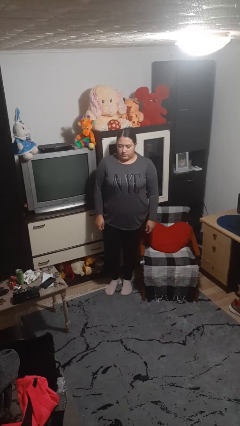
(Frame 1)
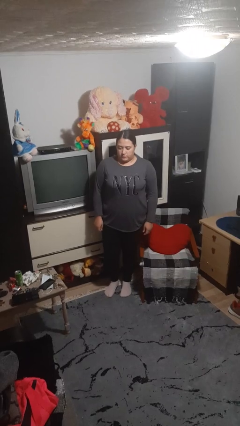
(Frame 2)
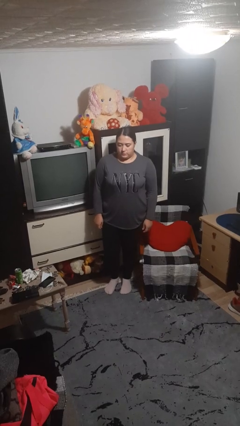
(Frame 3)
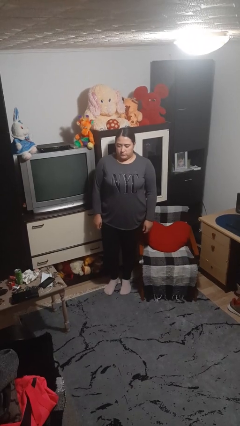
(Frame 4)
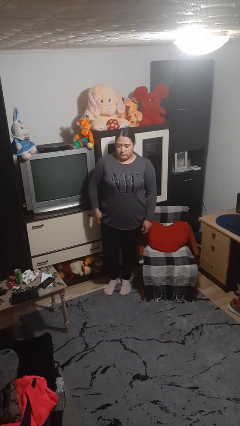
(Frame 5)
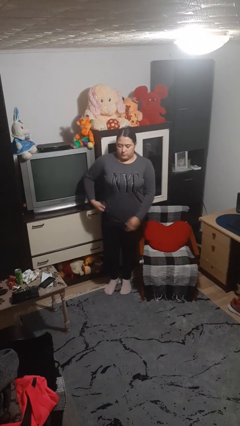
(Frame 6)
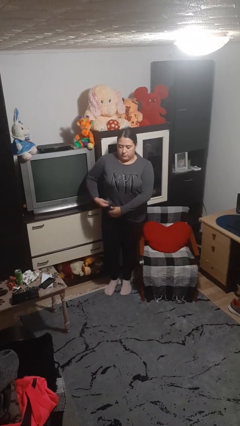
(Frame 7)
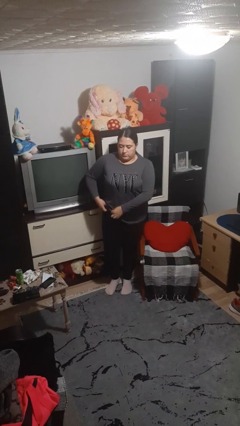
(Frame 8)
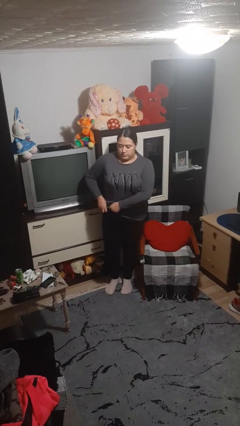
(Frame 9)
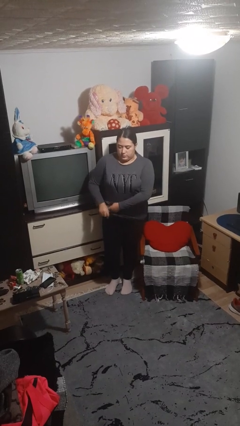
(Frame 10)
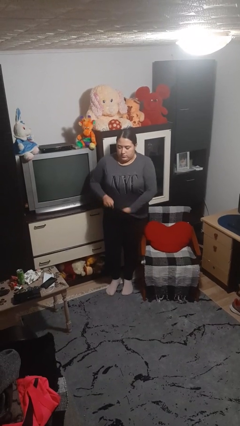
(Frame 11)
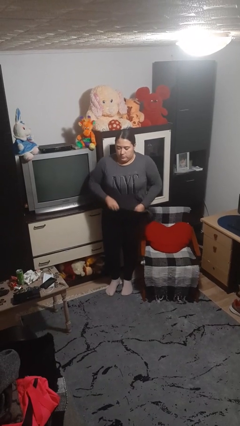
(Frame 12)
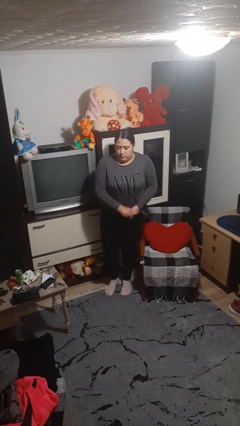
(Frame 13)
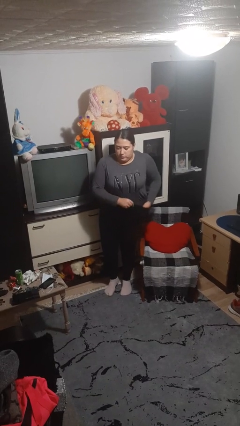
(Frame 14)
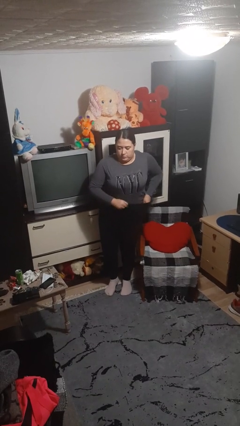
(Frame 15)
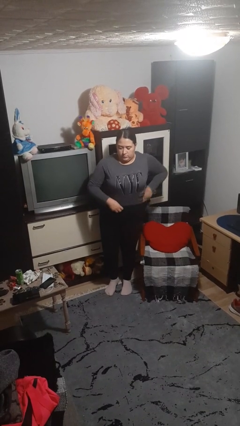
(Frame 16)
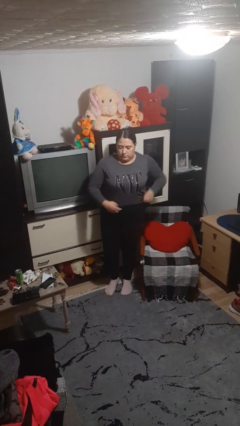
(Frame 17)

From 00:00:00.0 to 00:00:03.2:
person tucks in shirt

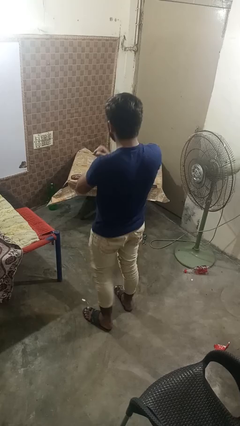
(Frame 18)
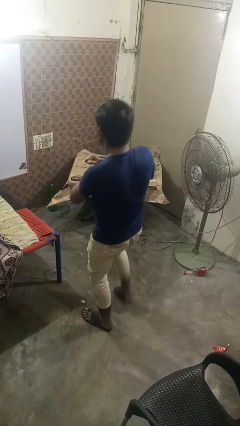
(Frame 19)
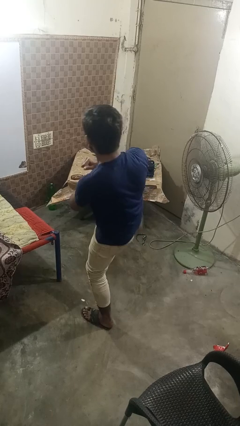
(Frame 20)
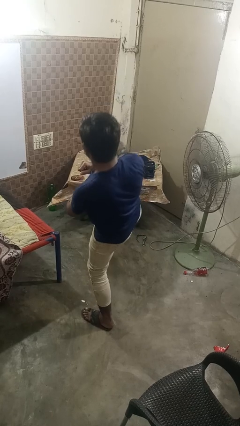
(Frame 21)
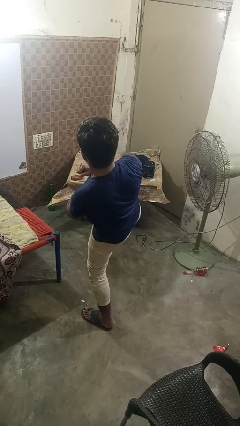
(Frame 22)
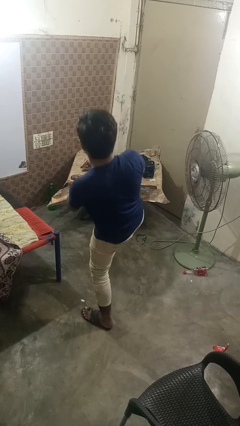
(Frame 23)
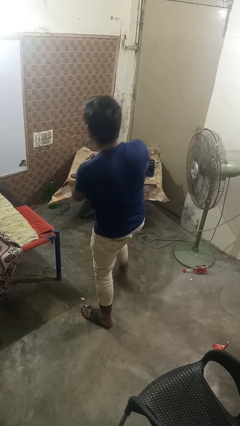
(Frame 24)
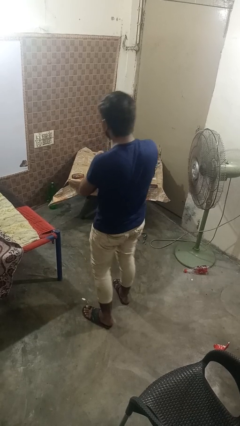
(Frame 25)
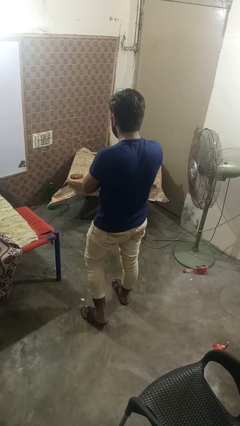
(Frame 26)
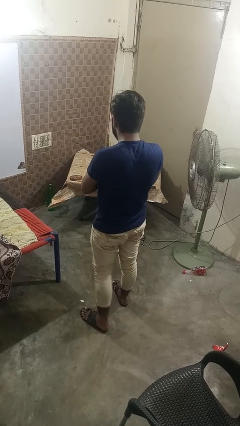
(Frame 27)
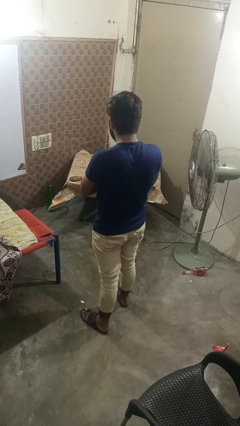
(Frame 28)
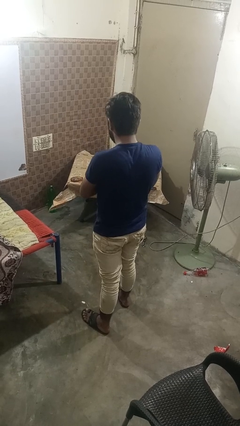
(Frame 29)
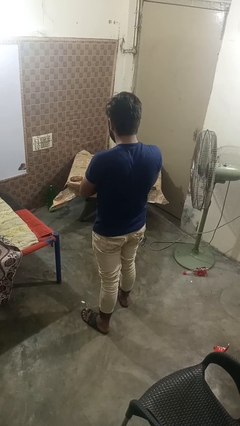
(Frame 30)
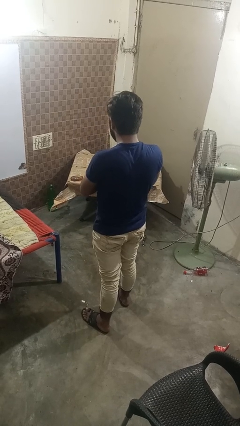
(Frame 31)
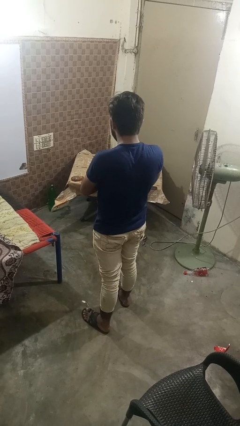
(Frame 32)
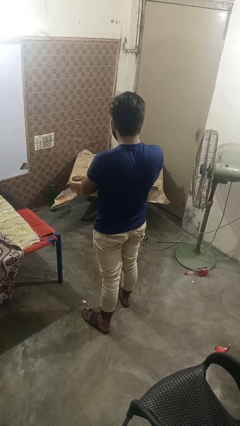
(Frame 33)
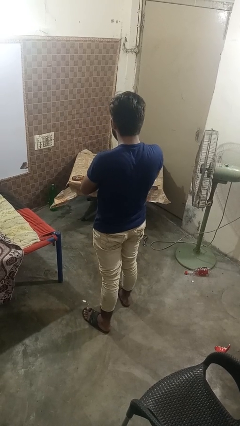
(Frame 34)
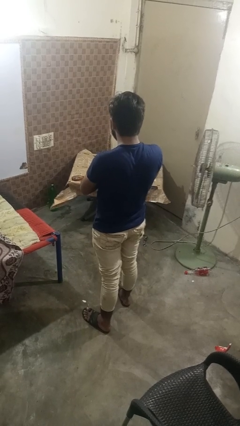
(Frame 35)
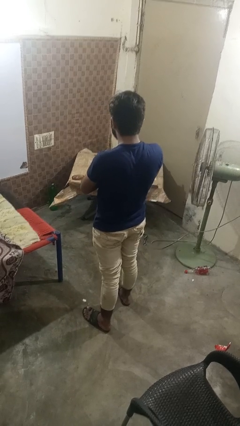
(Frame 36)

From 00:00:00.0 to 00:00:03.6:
person karate kicks

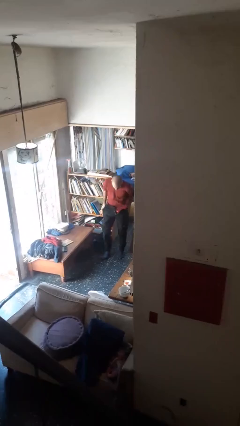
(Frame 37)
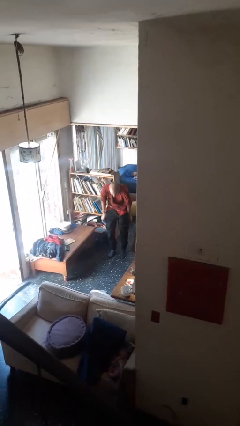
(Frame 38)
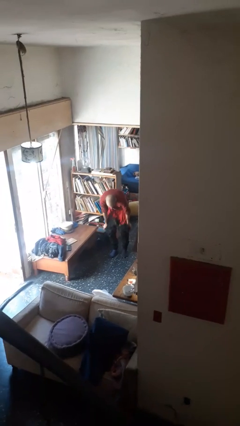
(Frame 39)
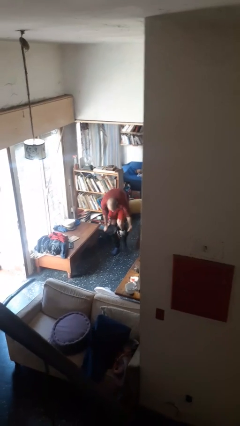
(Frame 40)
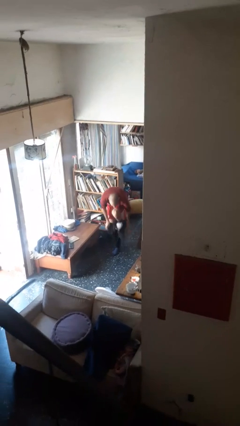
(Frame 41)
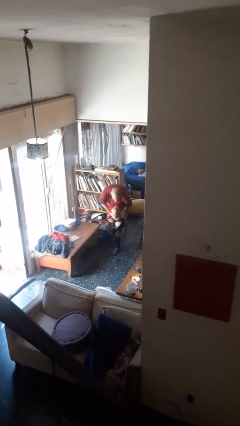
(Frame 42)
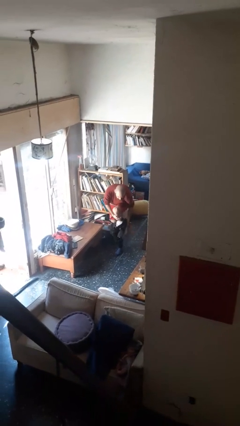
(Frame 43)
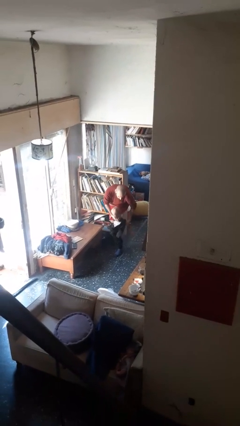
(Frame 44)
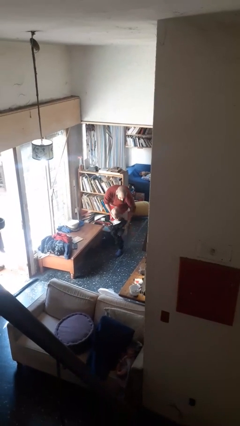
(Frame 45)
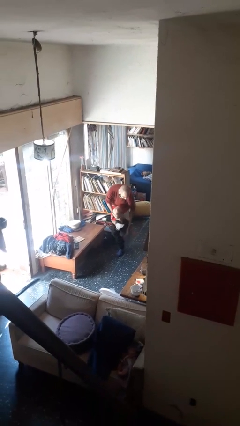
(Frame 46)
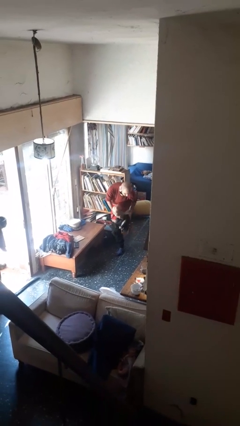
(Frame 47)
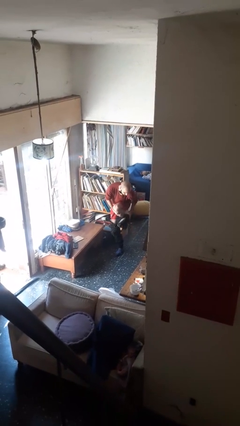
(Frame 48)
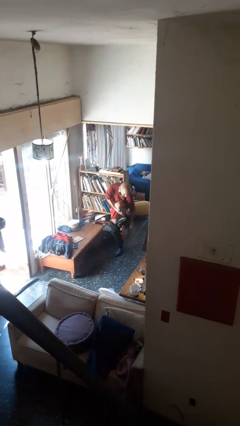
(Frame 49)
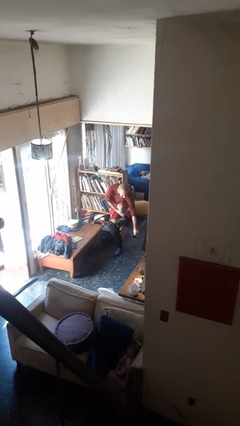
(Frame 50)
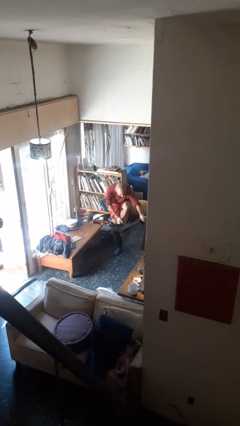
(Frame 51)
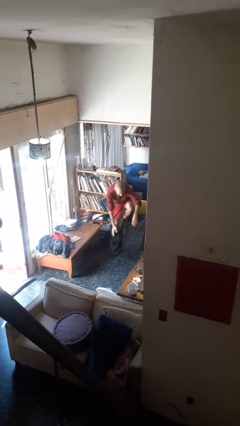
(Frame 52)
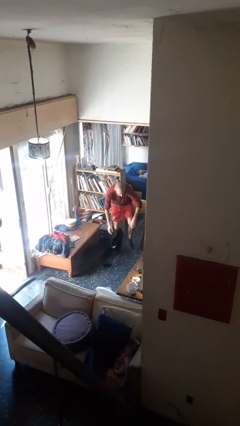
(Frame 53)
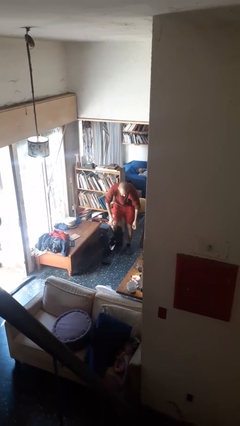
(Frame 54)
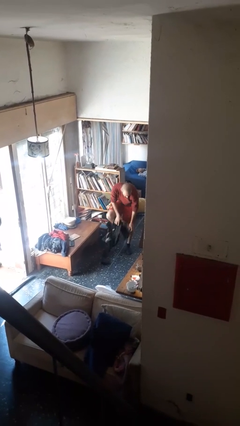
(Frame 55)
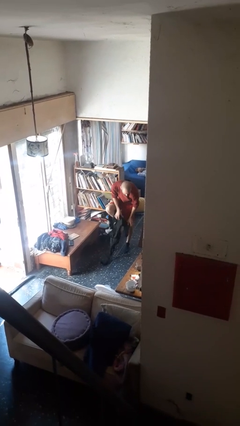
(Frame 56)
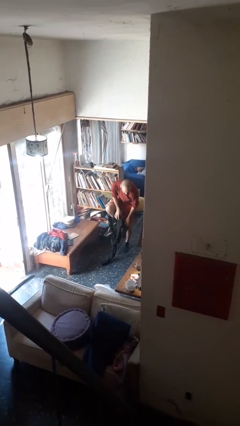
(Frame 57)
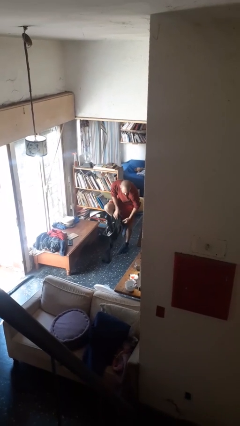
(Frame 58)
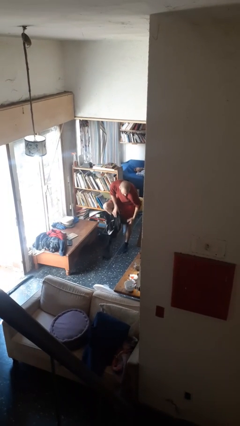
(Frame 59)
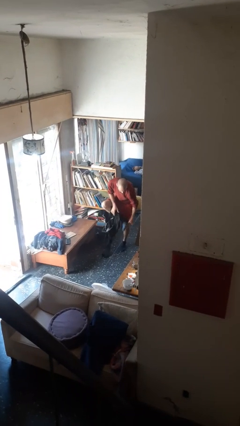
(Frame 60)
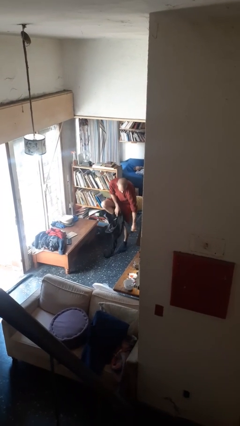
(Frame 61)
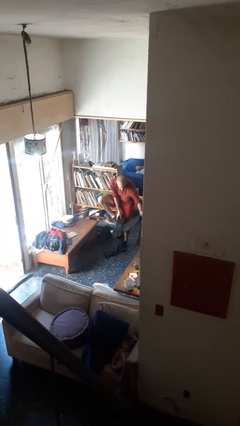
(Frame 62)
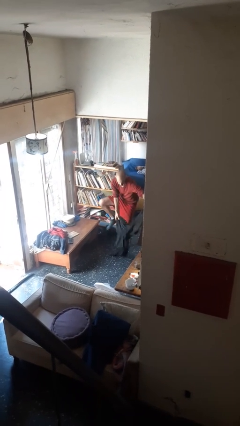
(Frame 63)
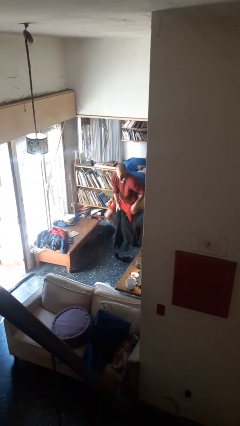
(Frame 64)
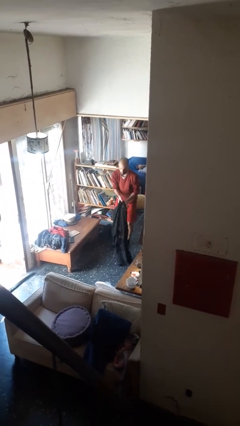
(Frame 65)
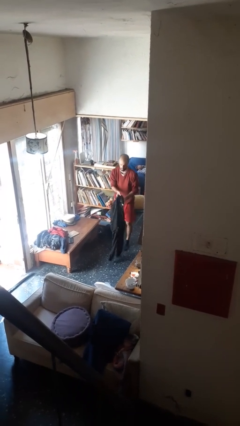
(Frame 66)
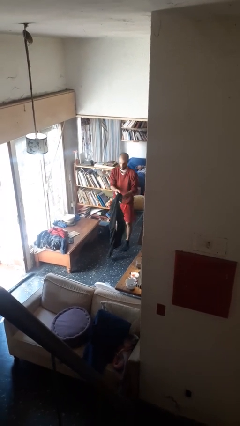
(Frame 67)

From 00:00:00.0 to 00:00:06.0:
person takes off pants

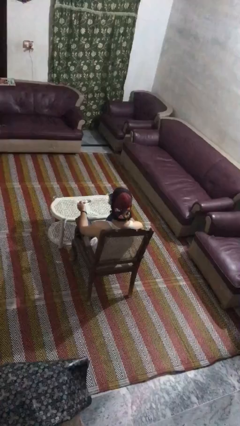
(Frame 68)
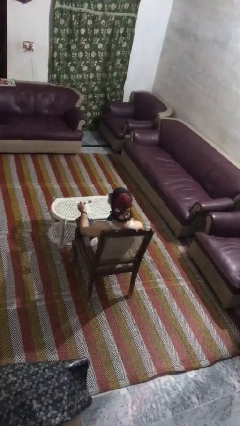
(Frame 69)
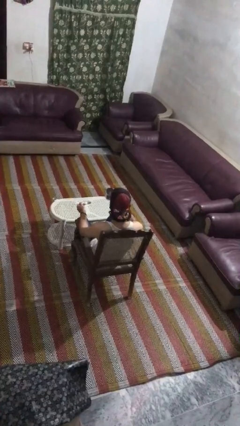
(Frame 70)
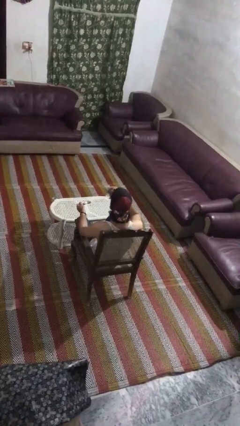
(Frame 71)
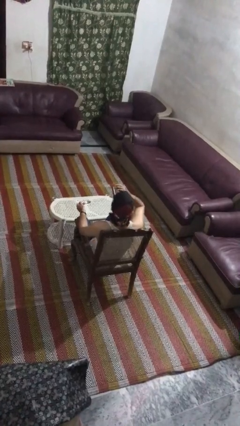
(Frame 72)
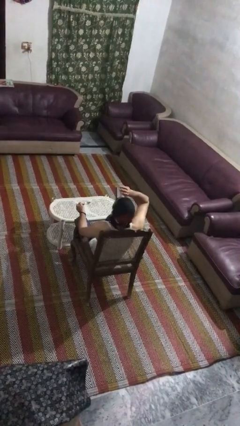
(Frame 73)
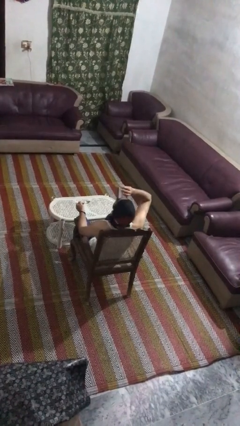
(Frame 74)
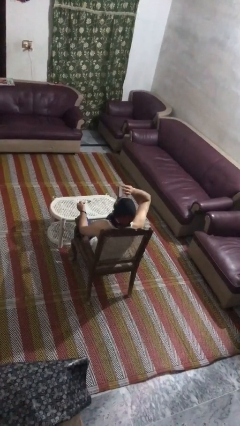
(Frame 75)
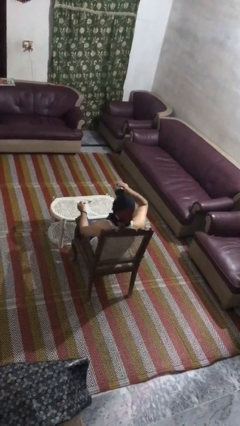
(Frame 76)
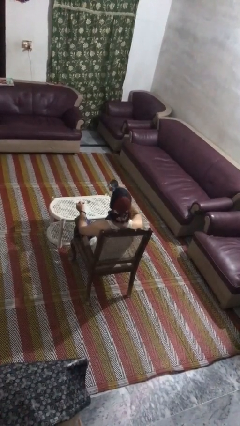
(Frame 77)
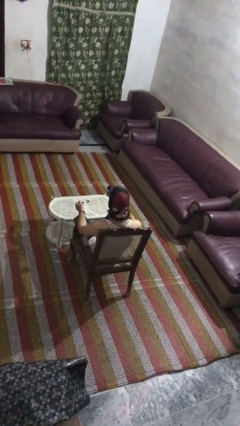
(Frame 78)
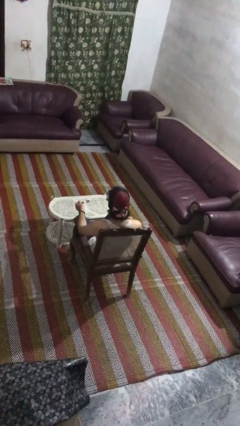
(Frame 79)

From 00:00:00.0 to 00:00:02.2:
person drinks from mug

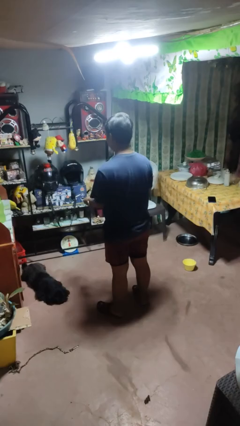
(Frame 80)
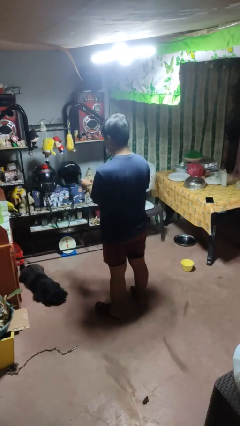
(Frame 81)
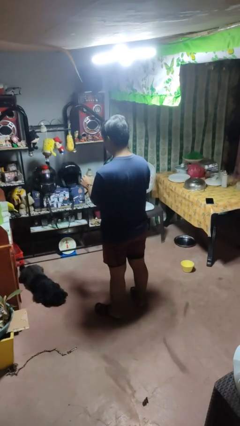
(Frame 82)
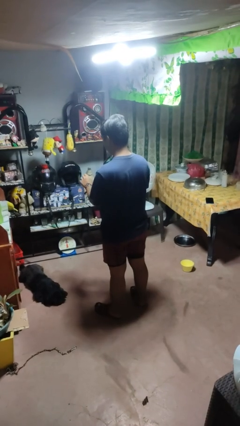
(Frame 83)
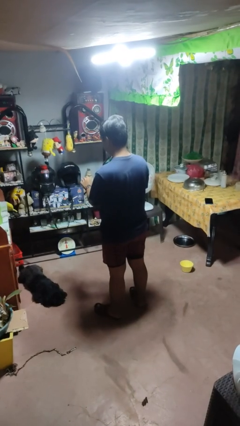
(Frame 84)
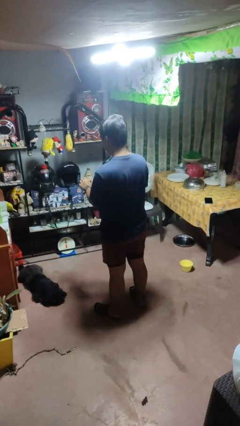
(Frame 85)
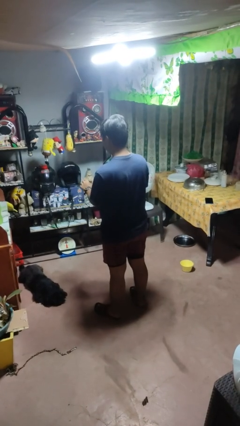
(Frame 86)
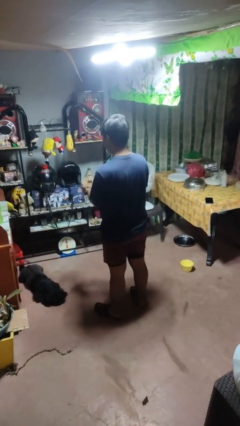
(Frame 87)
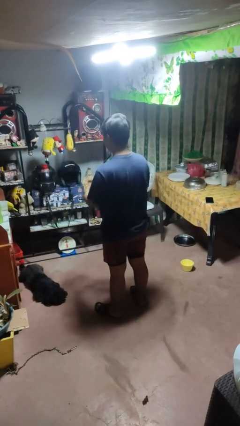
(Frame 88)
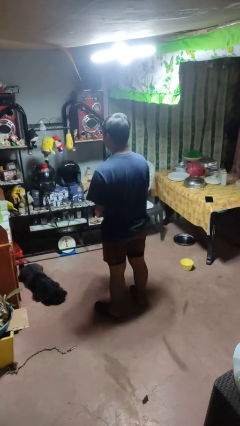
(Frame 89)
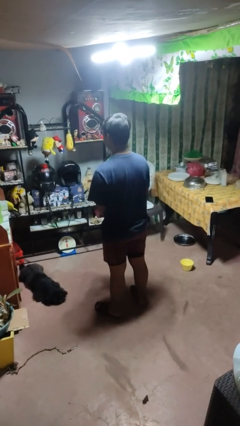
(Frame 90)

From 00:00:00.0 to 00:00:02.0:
person takes off wristwatch

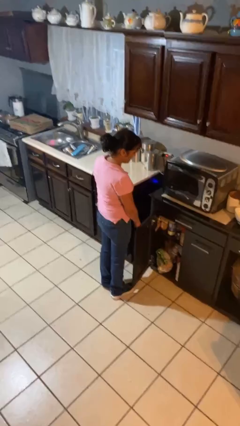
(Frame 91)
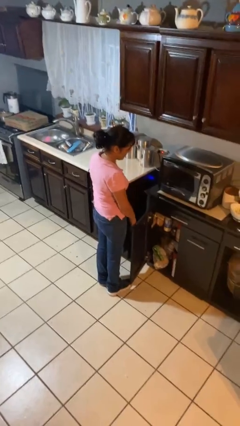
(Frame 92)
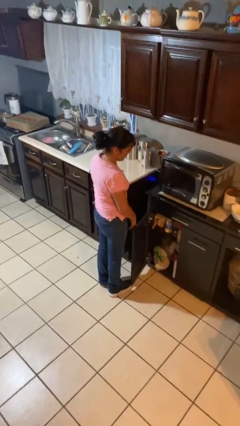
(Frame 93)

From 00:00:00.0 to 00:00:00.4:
person opens cabinet
